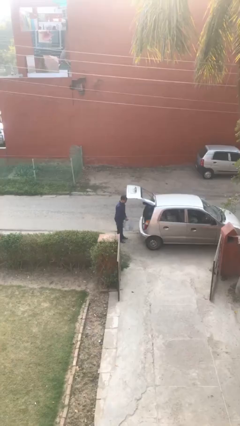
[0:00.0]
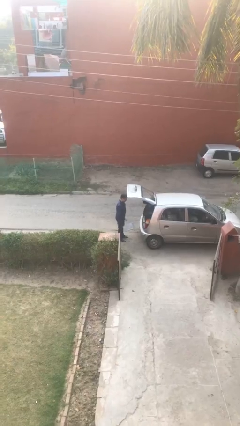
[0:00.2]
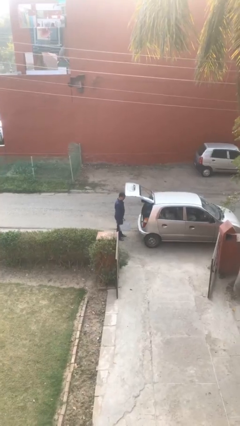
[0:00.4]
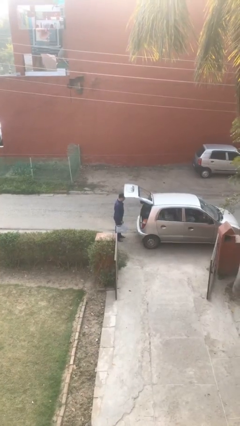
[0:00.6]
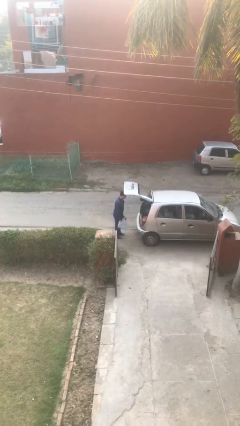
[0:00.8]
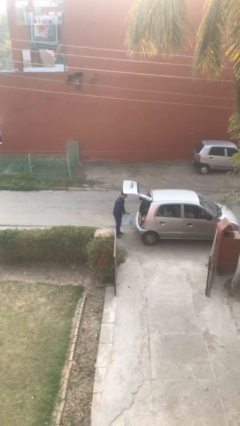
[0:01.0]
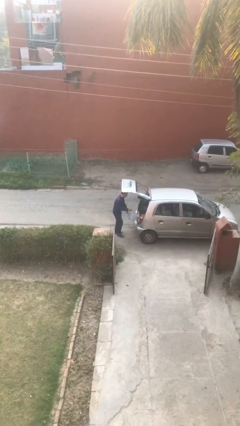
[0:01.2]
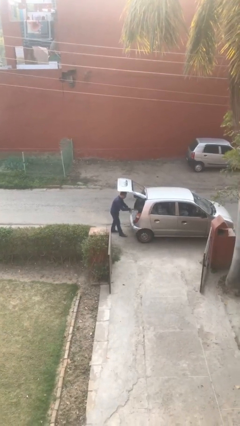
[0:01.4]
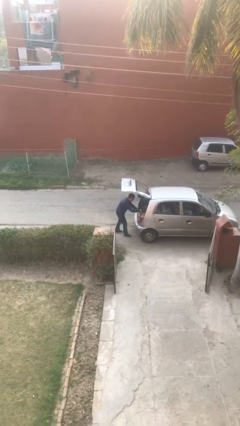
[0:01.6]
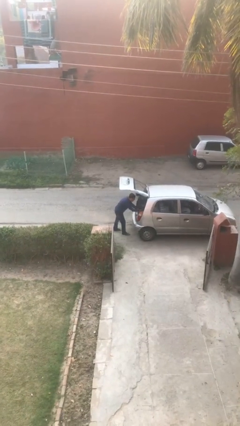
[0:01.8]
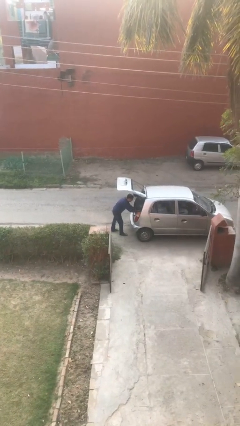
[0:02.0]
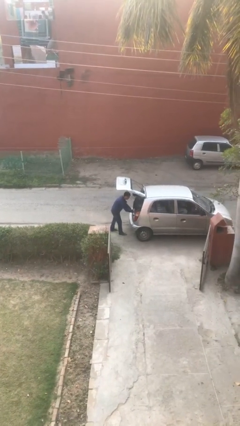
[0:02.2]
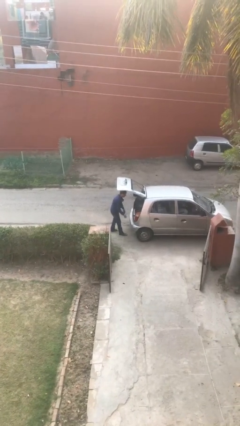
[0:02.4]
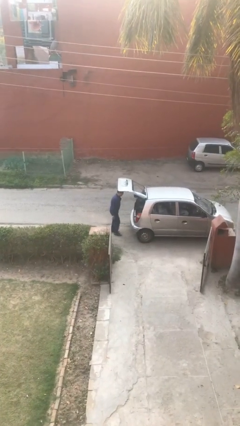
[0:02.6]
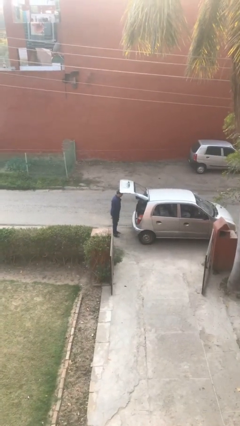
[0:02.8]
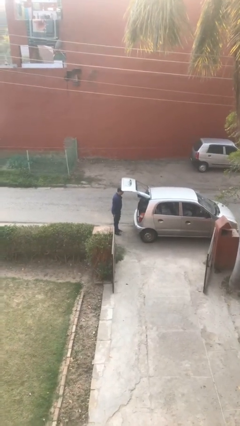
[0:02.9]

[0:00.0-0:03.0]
person loads car

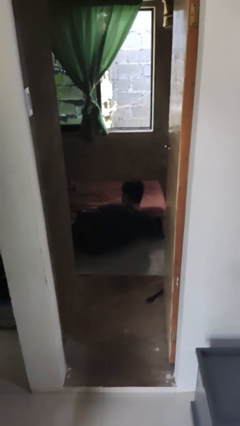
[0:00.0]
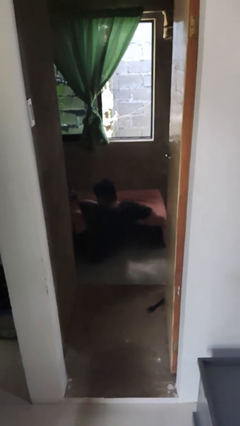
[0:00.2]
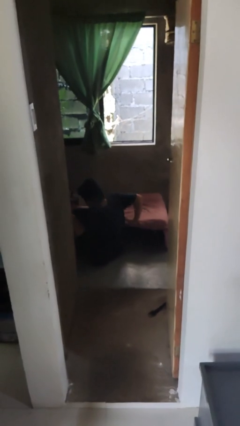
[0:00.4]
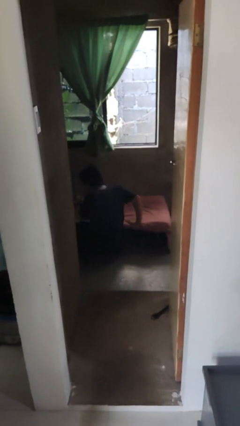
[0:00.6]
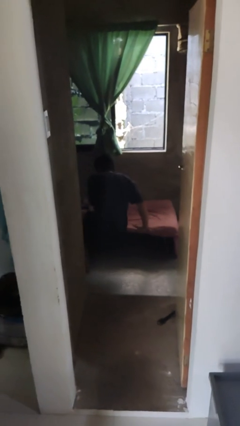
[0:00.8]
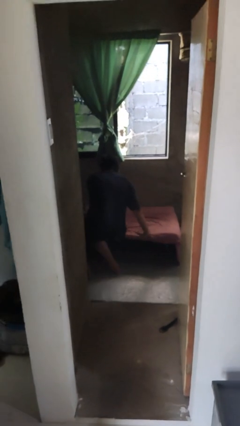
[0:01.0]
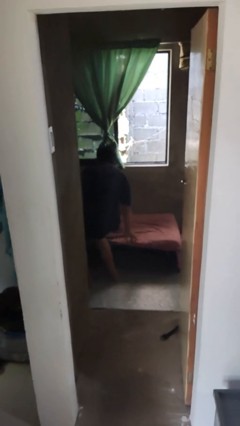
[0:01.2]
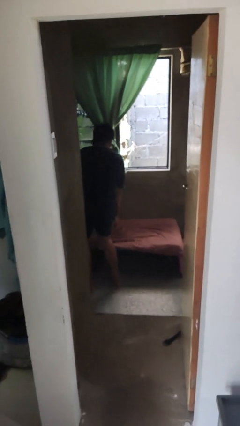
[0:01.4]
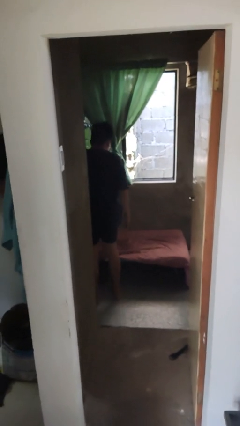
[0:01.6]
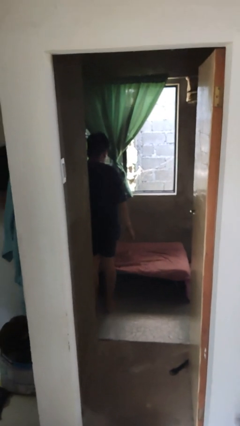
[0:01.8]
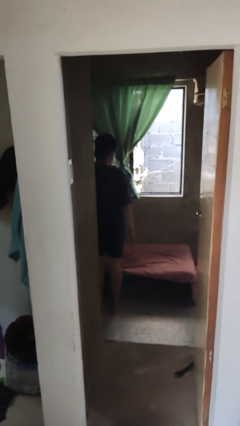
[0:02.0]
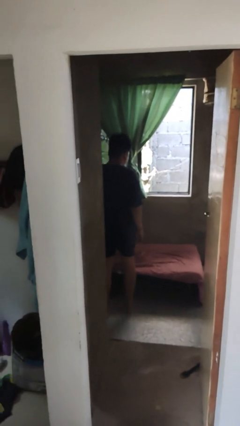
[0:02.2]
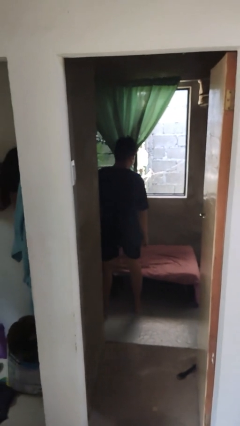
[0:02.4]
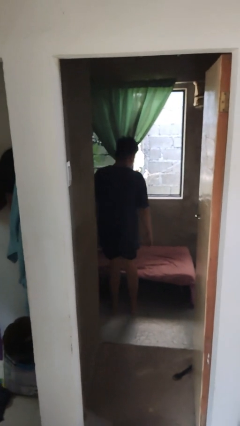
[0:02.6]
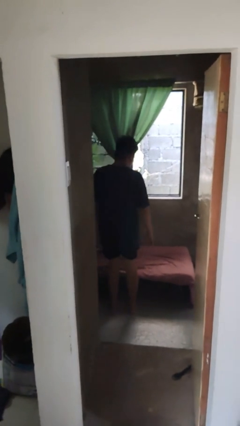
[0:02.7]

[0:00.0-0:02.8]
person stands up from floor

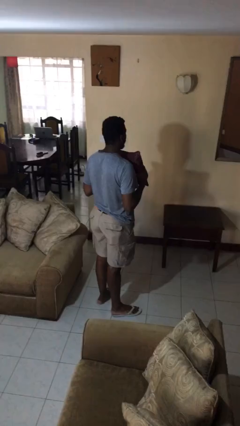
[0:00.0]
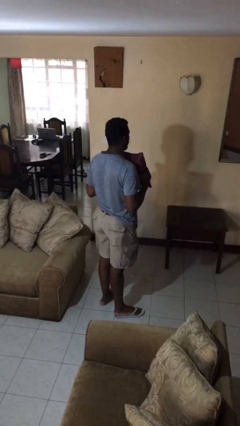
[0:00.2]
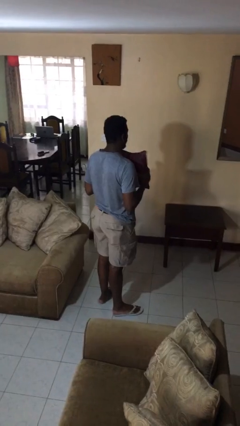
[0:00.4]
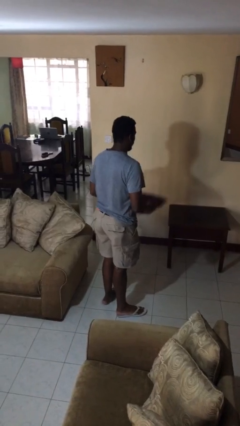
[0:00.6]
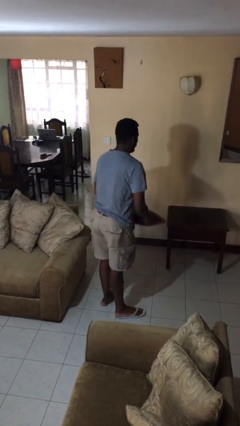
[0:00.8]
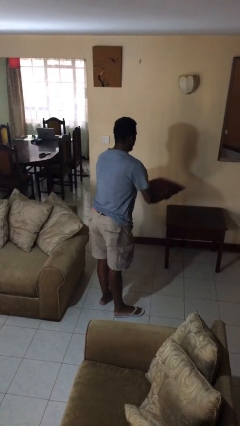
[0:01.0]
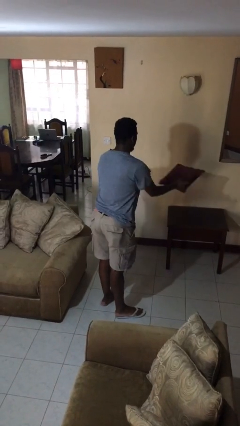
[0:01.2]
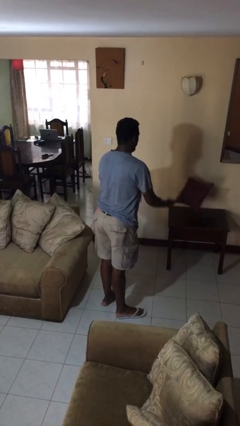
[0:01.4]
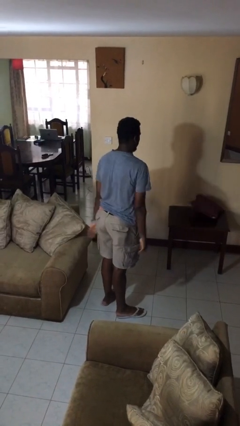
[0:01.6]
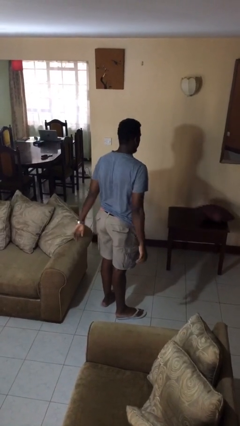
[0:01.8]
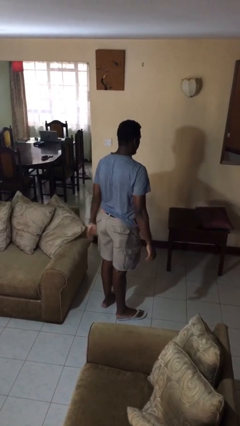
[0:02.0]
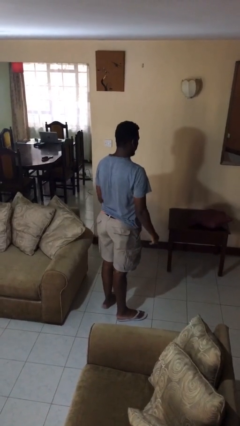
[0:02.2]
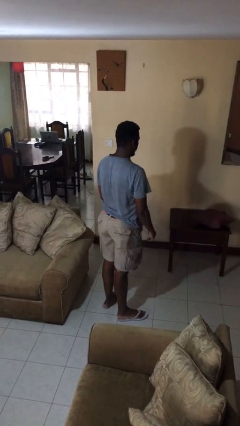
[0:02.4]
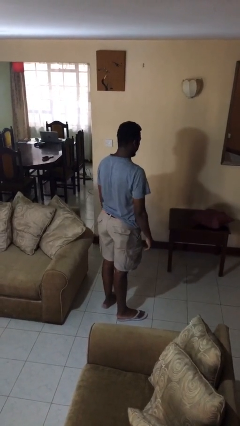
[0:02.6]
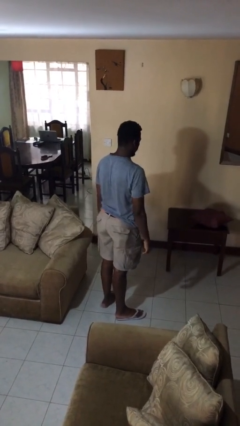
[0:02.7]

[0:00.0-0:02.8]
person throws object on table

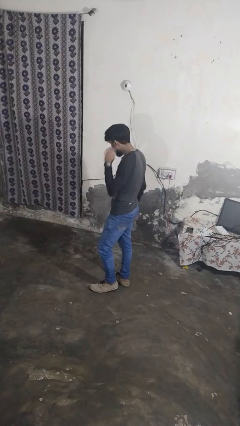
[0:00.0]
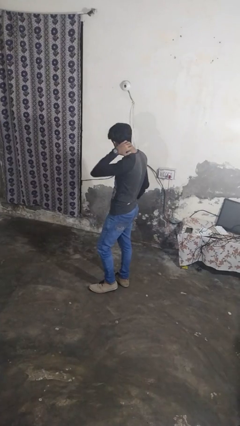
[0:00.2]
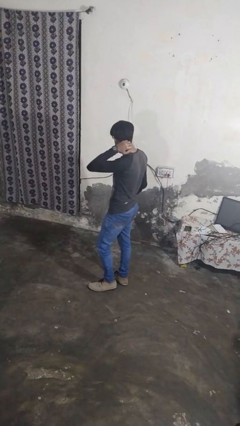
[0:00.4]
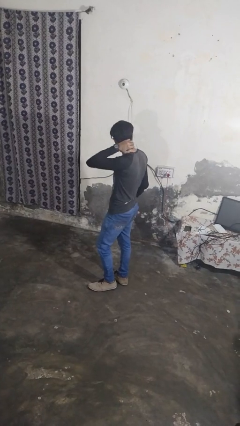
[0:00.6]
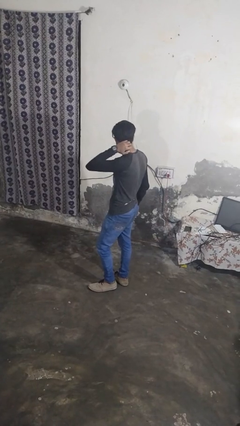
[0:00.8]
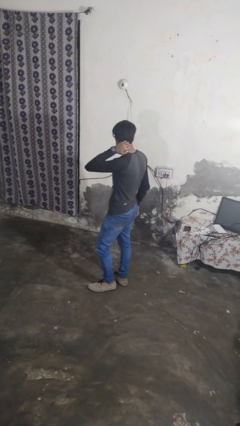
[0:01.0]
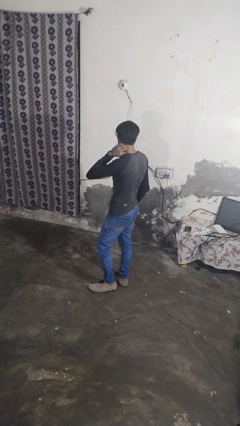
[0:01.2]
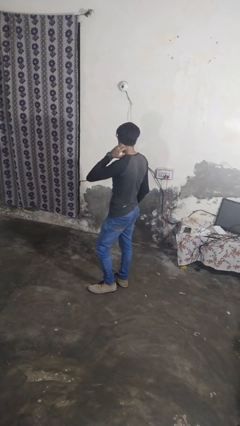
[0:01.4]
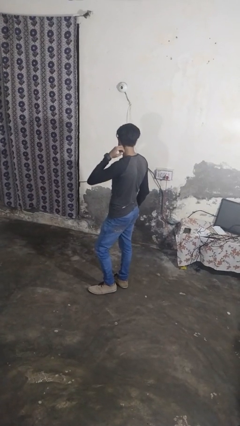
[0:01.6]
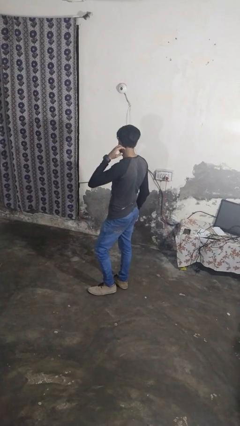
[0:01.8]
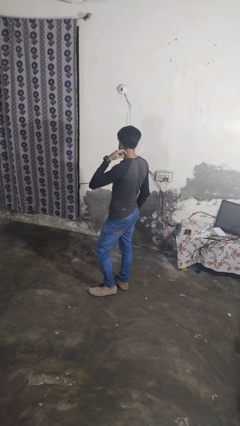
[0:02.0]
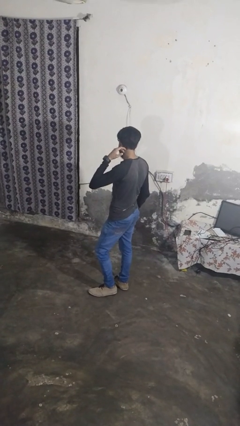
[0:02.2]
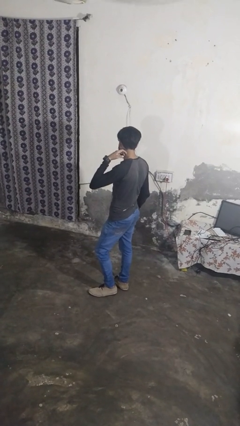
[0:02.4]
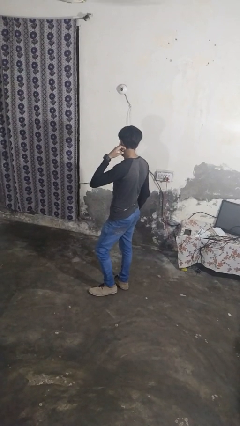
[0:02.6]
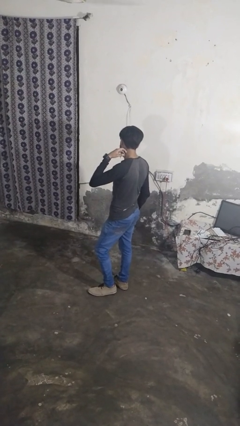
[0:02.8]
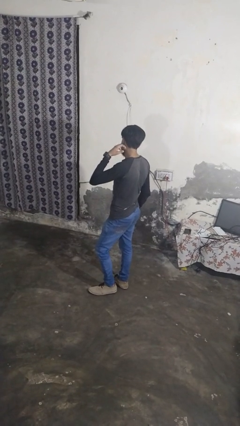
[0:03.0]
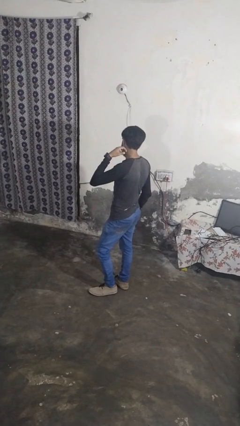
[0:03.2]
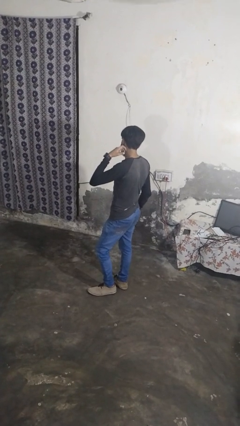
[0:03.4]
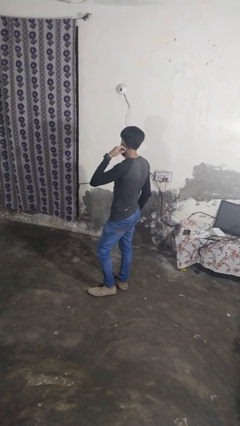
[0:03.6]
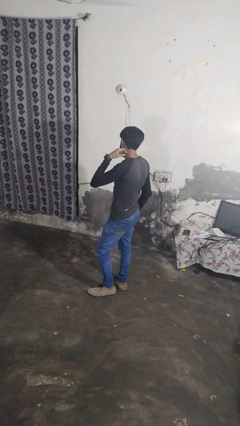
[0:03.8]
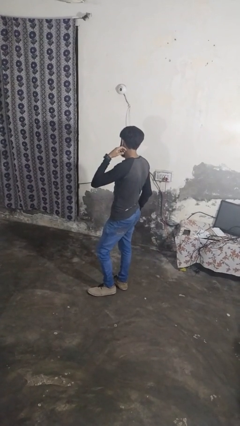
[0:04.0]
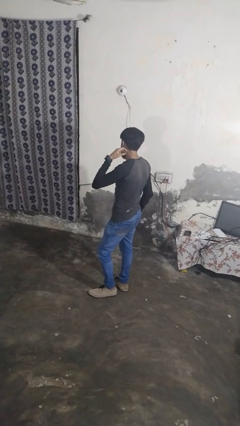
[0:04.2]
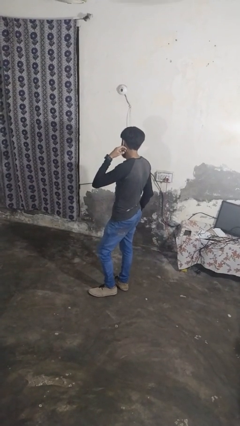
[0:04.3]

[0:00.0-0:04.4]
person cracks knuckles

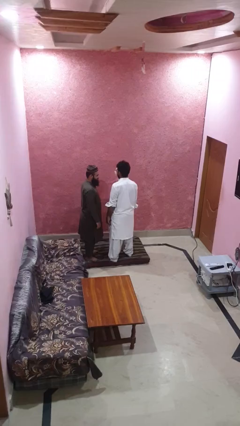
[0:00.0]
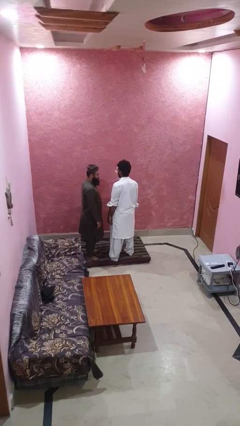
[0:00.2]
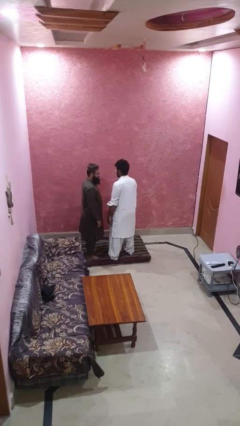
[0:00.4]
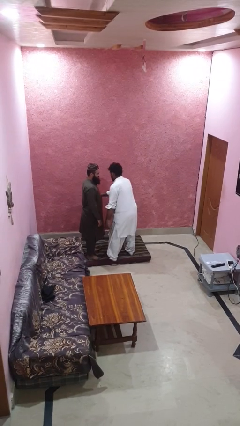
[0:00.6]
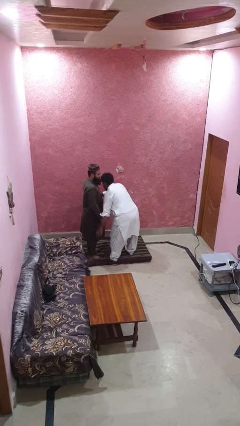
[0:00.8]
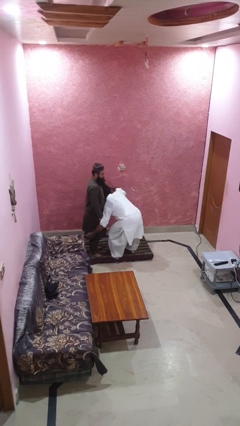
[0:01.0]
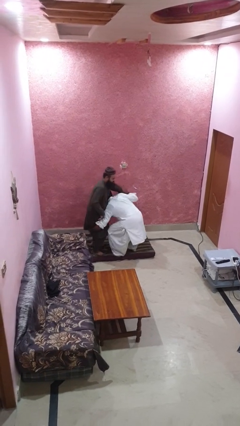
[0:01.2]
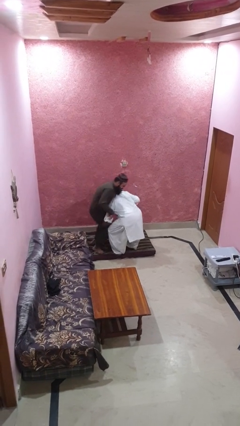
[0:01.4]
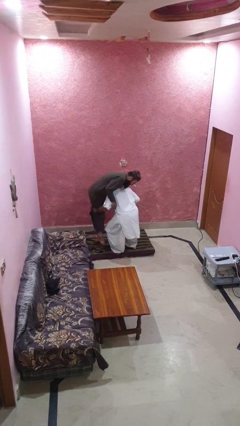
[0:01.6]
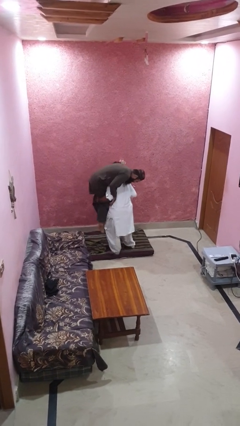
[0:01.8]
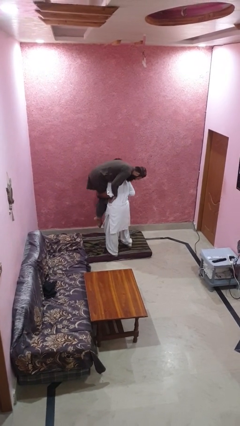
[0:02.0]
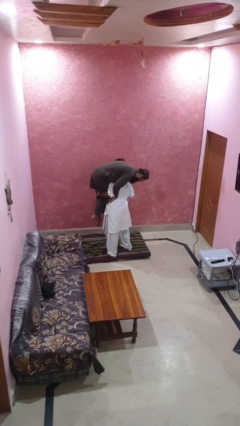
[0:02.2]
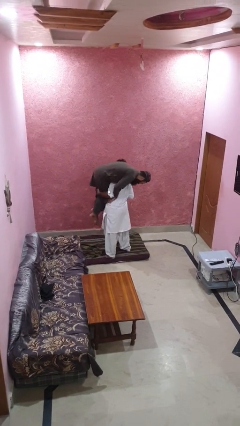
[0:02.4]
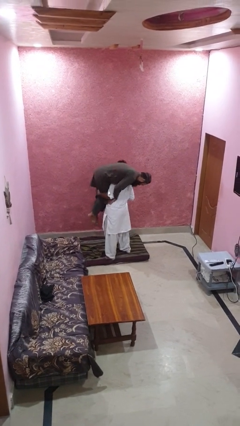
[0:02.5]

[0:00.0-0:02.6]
person carries person over shoulder

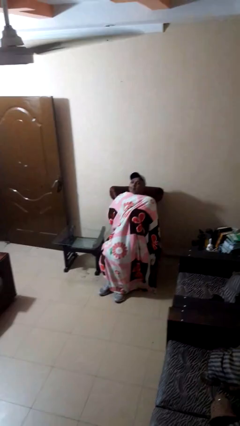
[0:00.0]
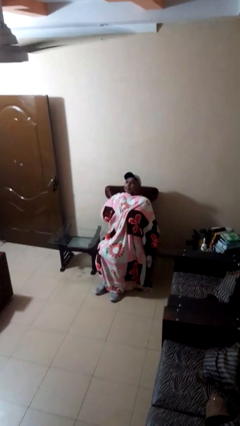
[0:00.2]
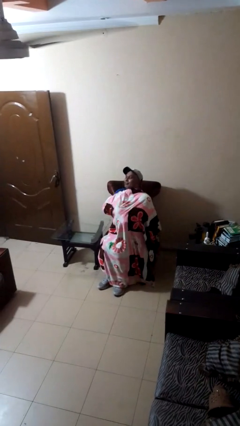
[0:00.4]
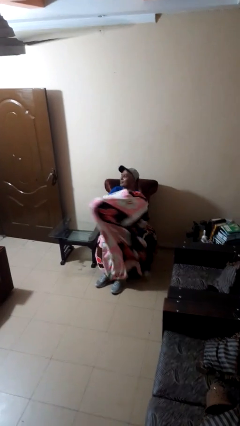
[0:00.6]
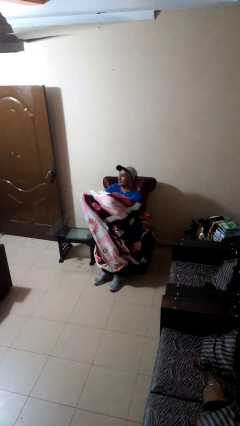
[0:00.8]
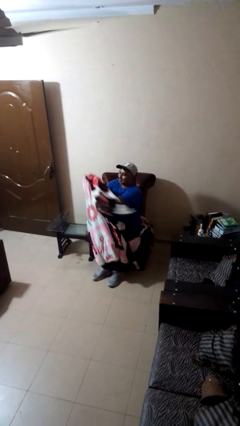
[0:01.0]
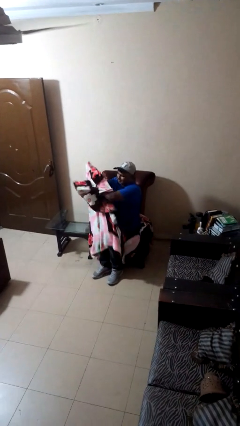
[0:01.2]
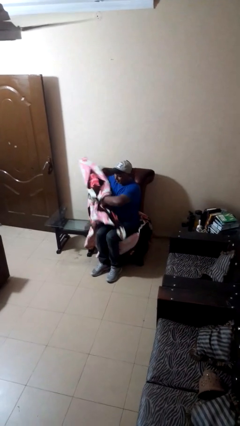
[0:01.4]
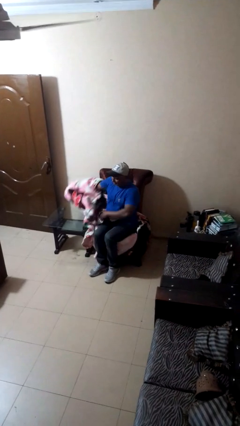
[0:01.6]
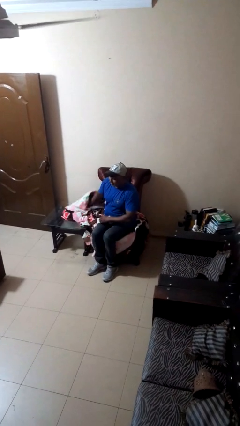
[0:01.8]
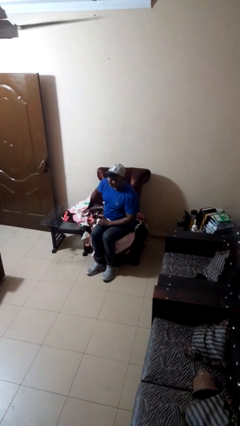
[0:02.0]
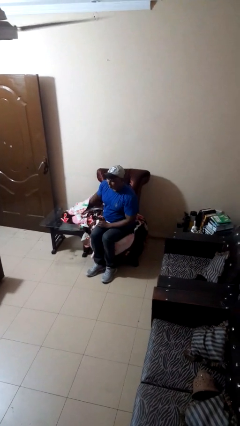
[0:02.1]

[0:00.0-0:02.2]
person uncovers with blanket
